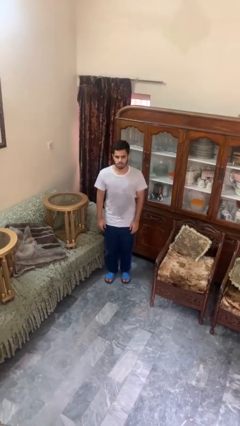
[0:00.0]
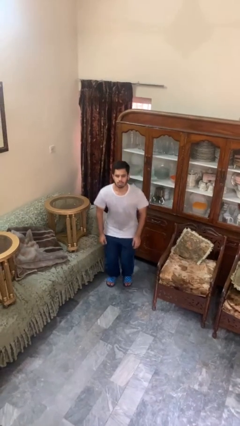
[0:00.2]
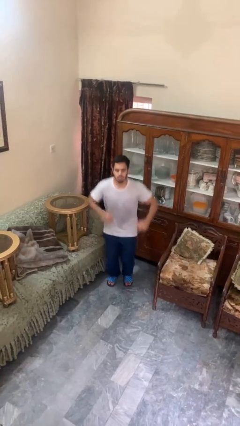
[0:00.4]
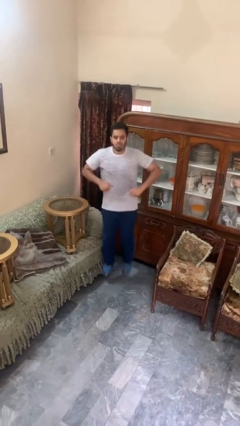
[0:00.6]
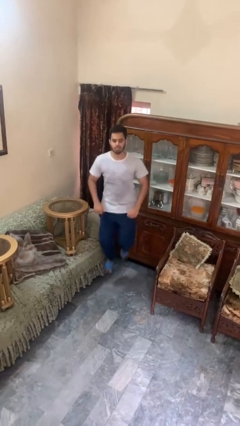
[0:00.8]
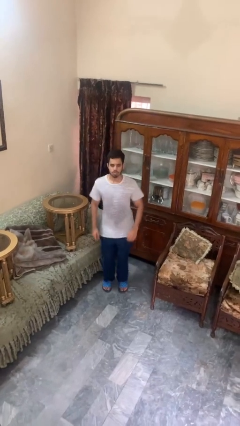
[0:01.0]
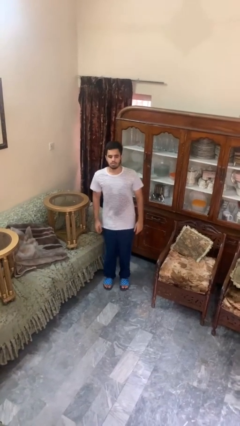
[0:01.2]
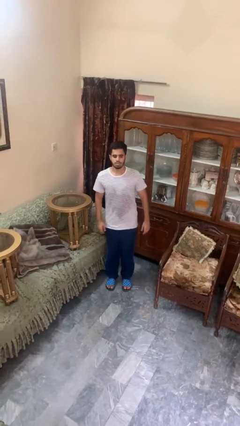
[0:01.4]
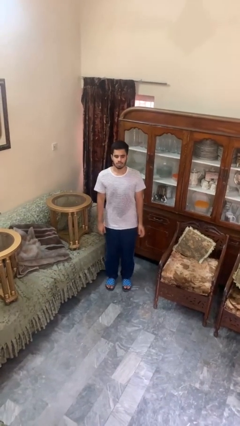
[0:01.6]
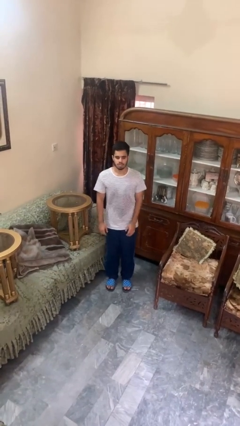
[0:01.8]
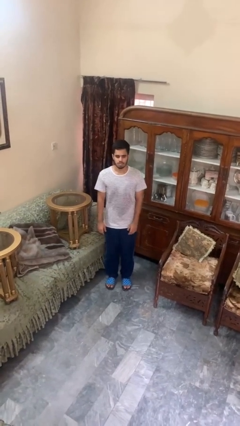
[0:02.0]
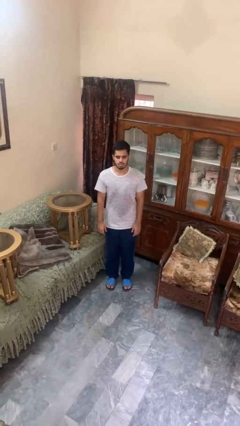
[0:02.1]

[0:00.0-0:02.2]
person jumps

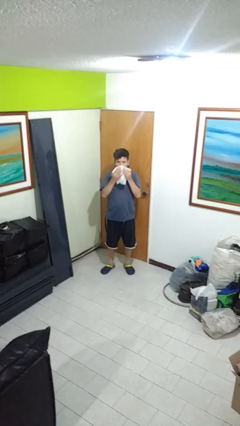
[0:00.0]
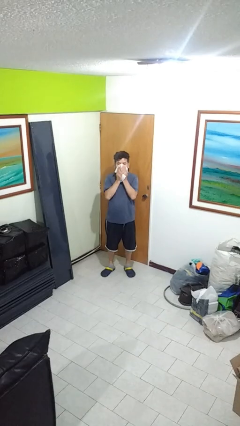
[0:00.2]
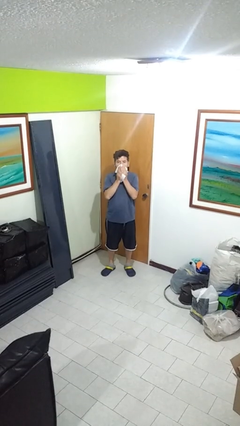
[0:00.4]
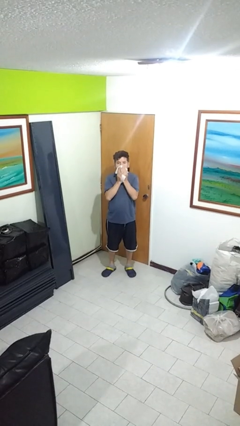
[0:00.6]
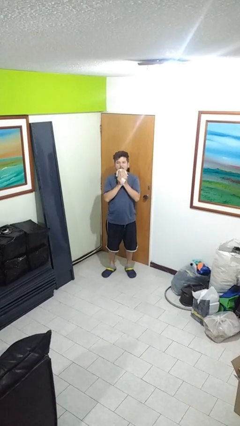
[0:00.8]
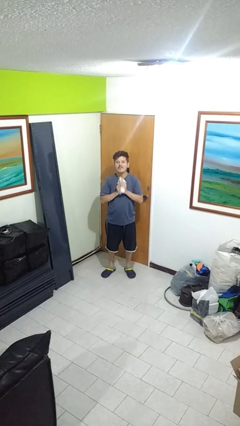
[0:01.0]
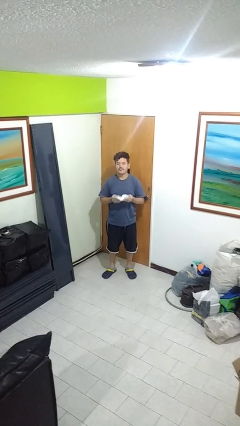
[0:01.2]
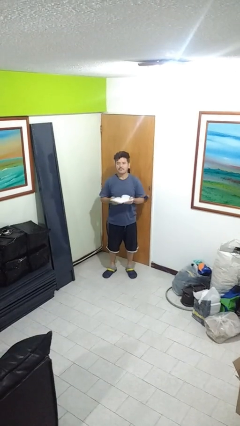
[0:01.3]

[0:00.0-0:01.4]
person wipes mouth with napkin

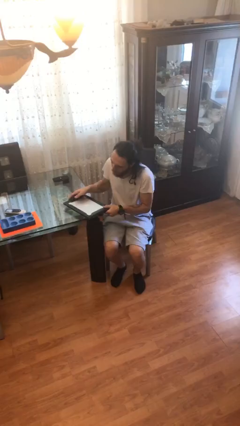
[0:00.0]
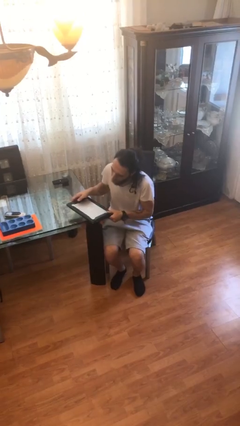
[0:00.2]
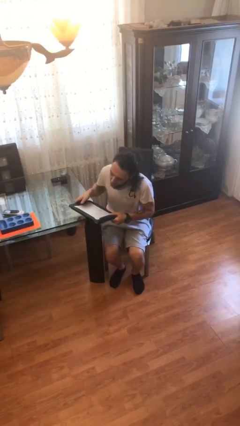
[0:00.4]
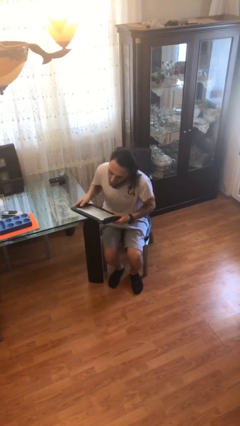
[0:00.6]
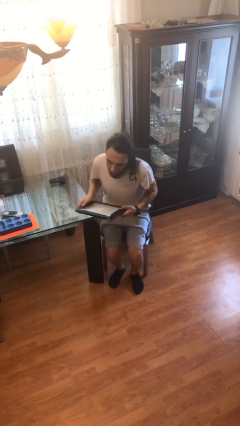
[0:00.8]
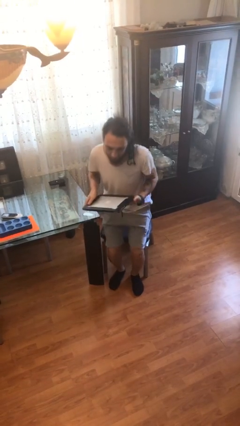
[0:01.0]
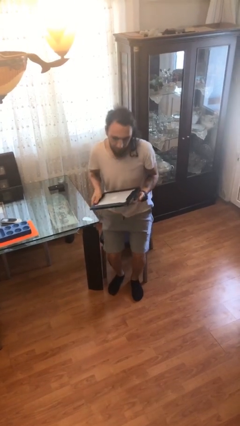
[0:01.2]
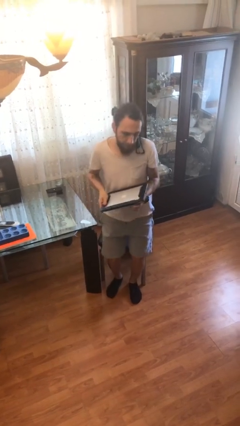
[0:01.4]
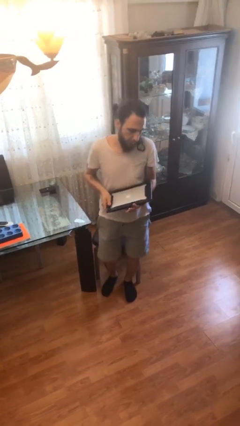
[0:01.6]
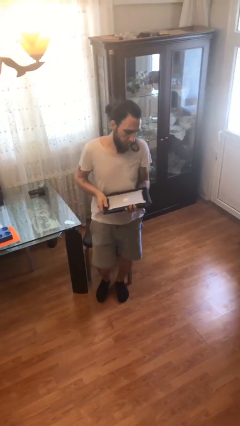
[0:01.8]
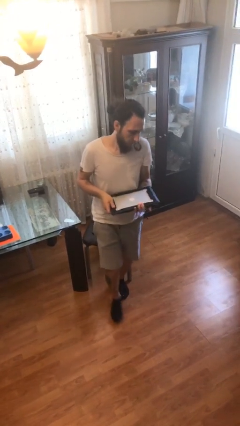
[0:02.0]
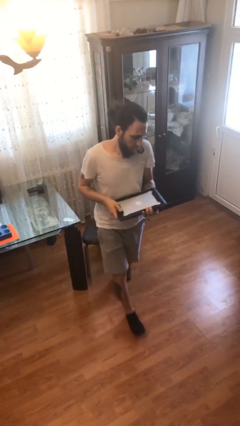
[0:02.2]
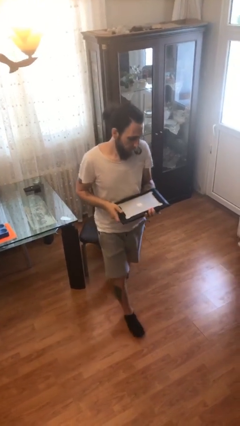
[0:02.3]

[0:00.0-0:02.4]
person stands up

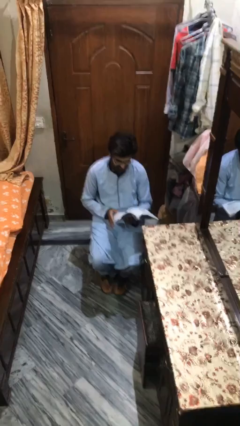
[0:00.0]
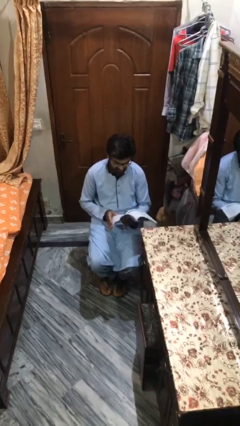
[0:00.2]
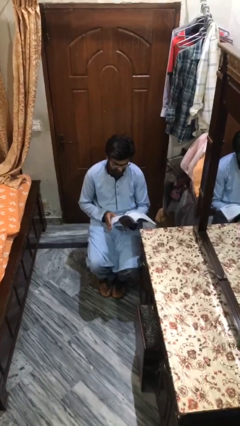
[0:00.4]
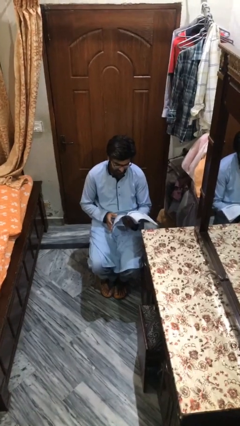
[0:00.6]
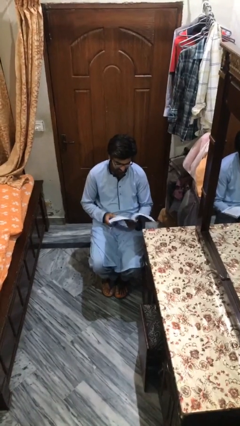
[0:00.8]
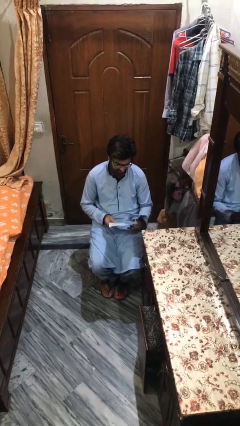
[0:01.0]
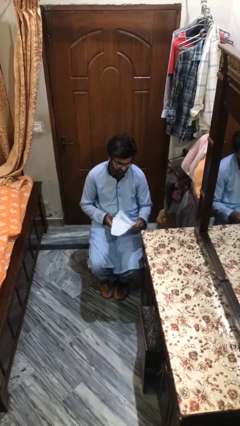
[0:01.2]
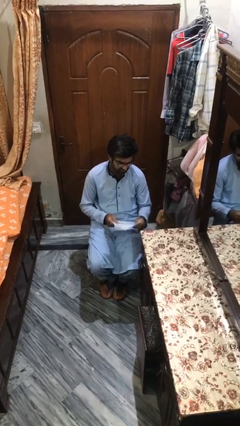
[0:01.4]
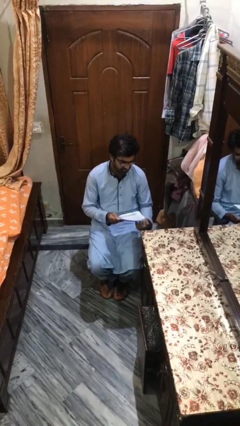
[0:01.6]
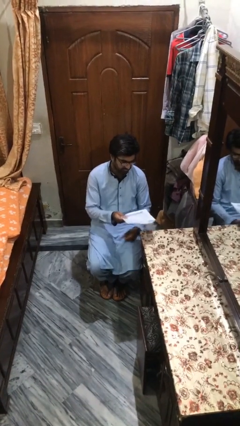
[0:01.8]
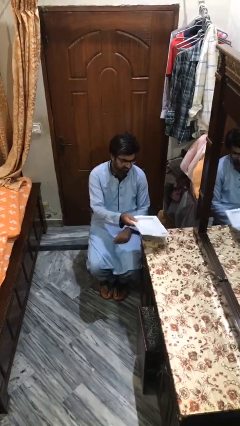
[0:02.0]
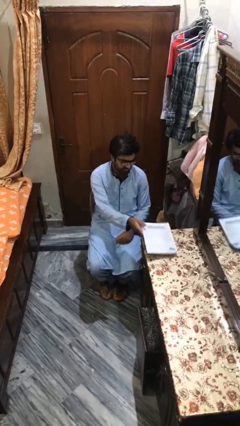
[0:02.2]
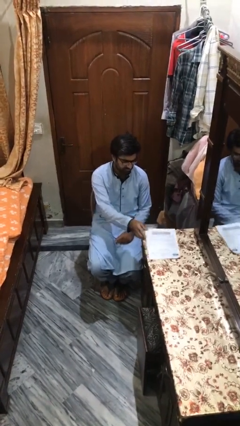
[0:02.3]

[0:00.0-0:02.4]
person puts down object on table

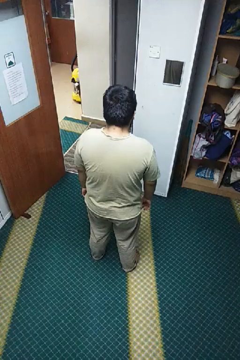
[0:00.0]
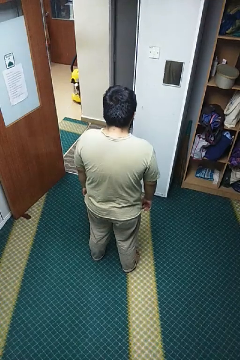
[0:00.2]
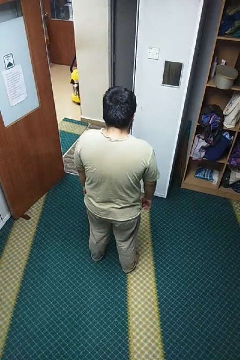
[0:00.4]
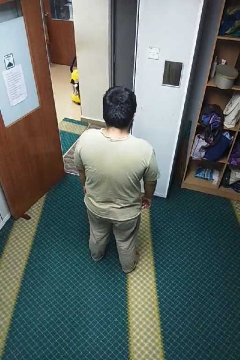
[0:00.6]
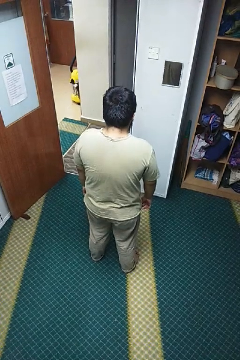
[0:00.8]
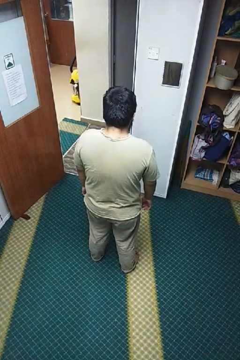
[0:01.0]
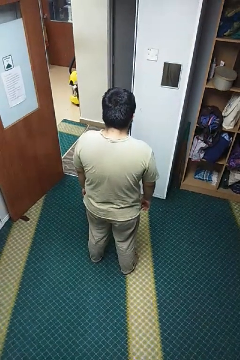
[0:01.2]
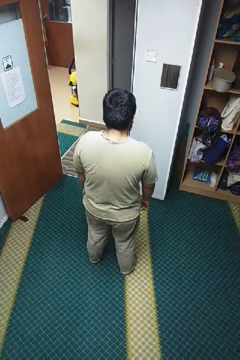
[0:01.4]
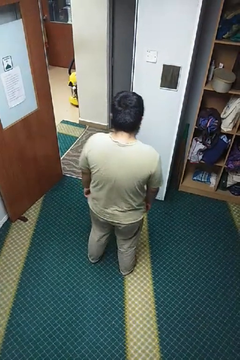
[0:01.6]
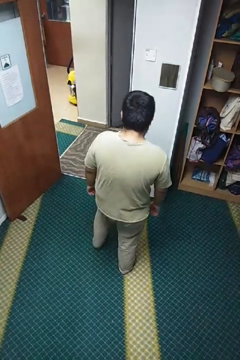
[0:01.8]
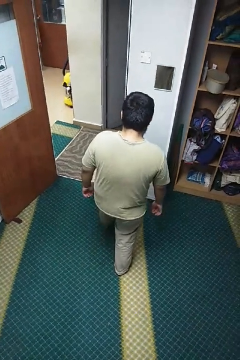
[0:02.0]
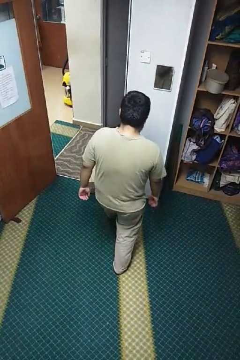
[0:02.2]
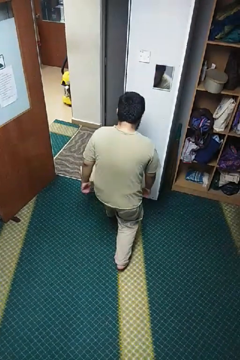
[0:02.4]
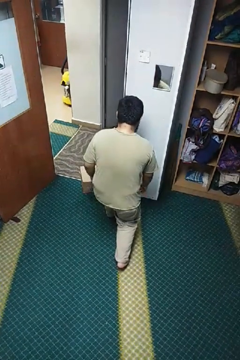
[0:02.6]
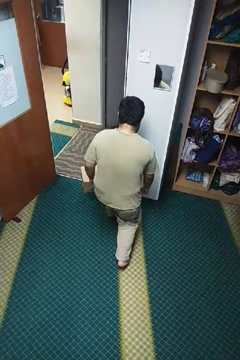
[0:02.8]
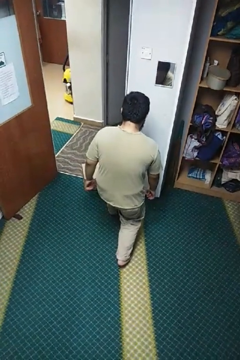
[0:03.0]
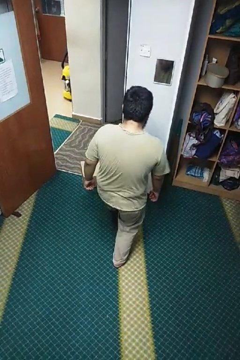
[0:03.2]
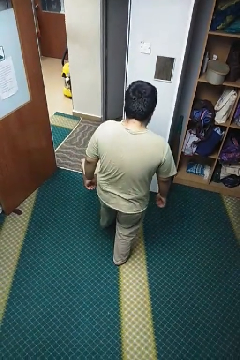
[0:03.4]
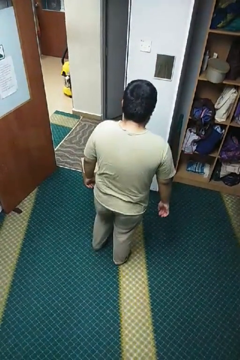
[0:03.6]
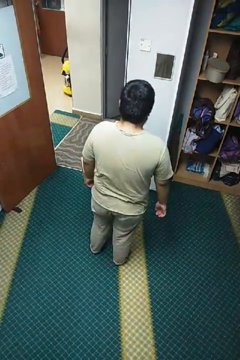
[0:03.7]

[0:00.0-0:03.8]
person exercises with lunges

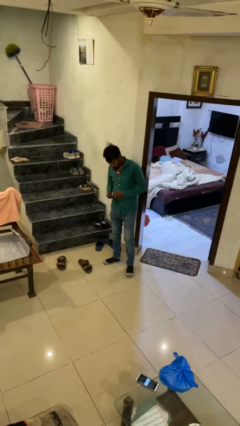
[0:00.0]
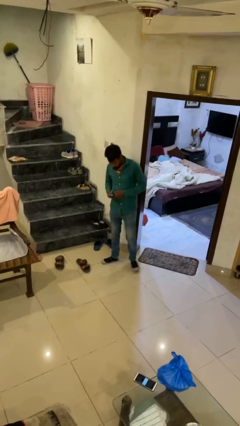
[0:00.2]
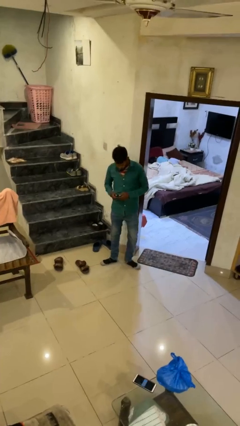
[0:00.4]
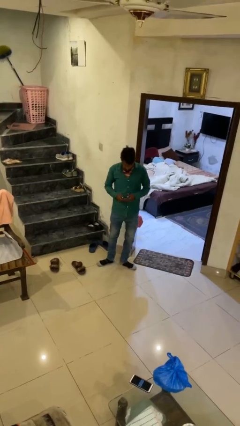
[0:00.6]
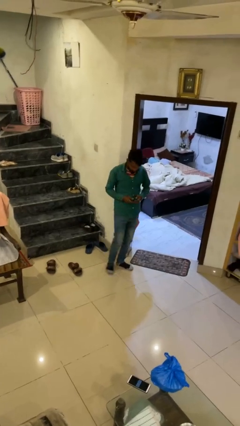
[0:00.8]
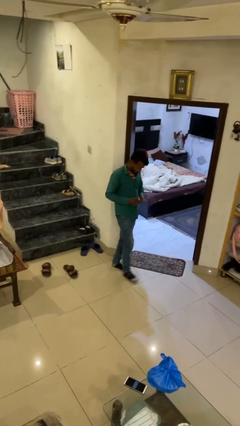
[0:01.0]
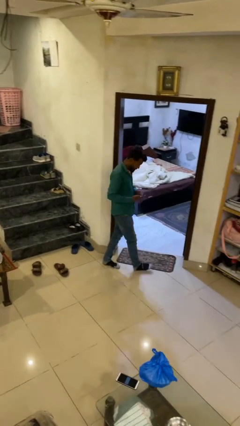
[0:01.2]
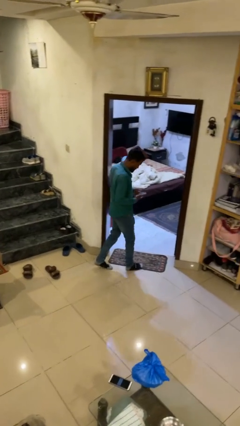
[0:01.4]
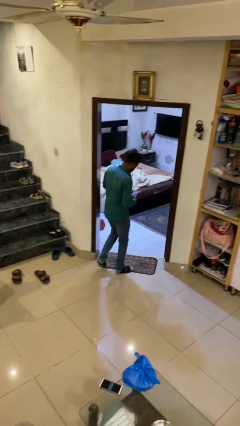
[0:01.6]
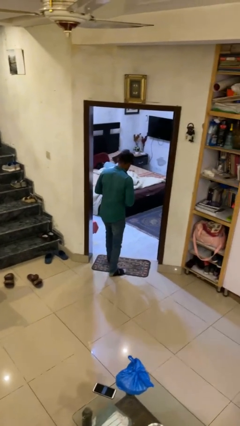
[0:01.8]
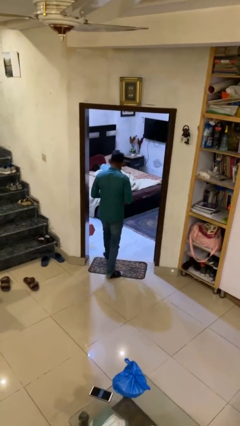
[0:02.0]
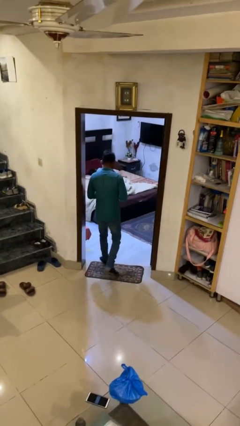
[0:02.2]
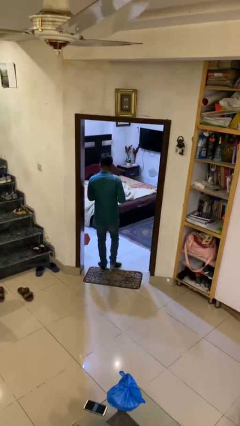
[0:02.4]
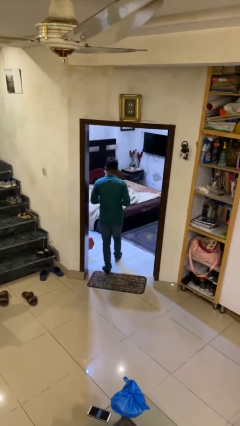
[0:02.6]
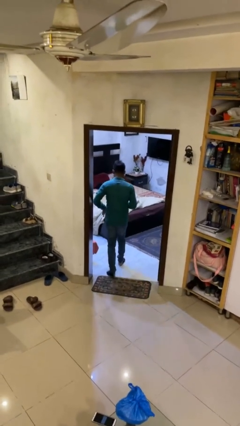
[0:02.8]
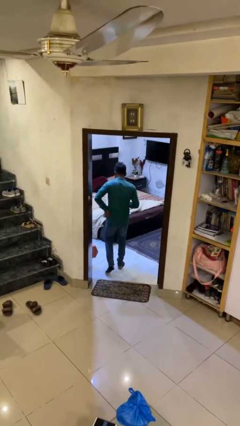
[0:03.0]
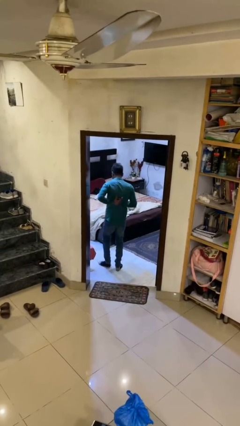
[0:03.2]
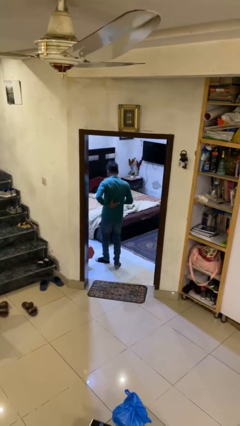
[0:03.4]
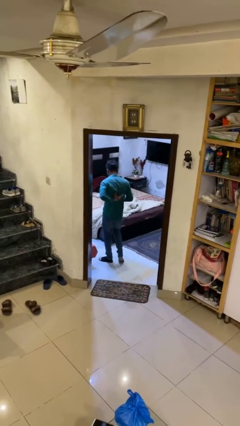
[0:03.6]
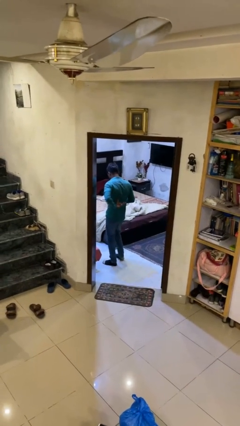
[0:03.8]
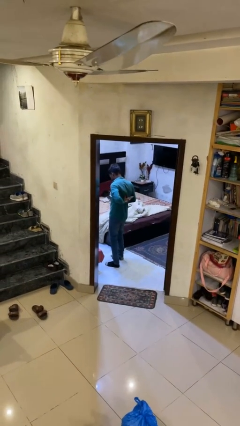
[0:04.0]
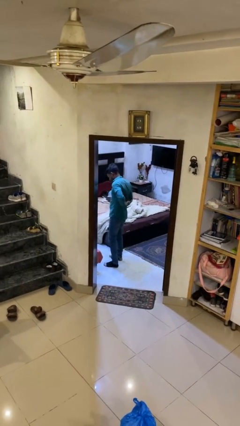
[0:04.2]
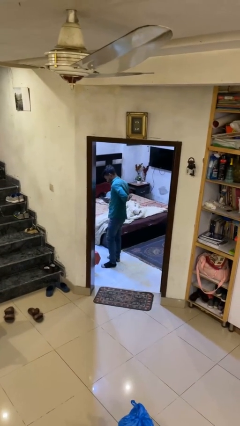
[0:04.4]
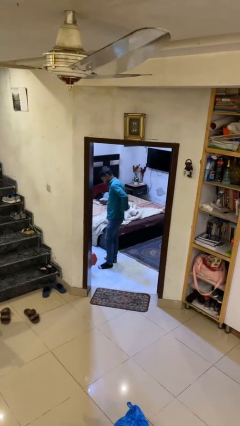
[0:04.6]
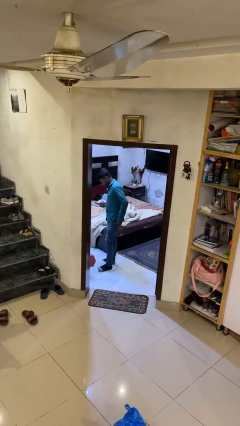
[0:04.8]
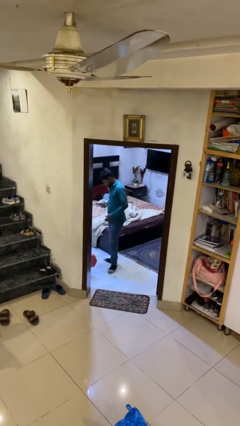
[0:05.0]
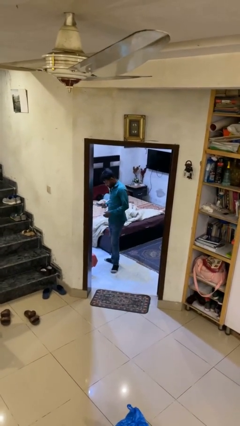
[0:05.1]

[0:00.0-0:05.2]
person exits scene through structure

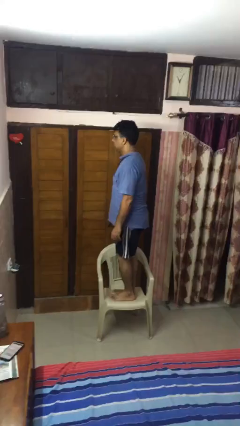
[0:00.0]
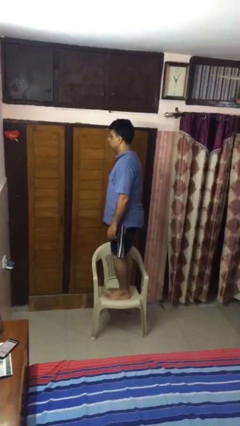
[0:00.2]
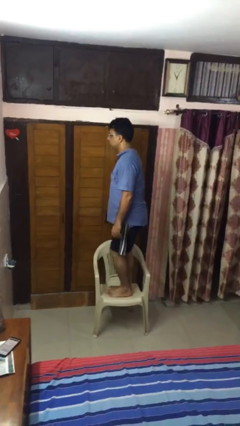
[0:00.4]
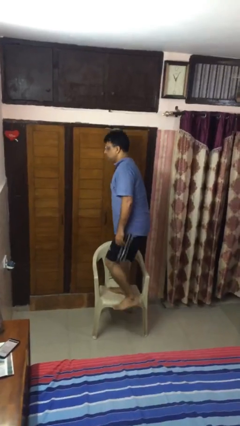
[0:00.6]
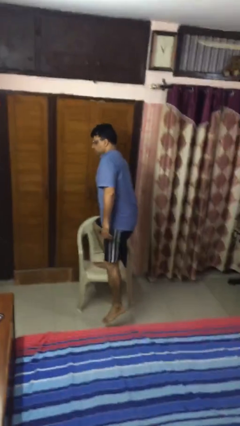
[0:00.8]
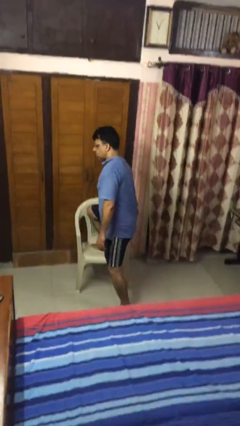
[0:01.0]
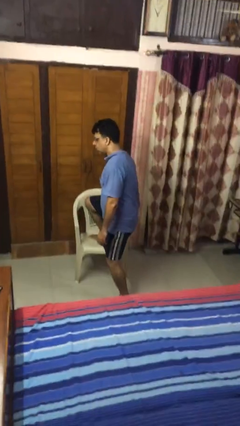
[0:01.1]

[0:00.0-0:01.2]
person climbs off chair
